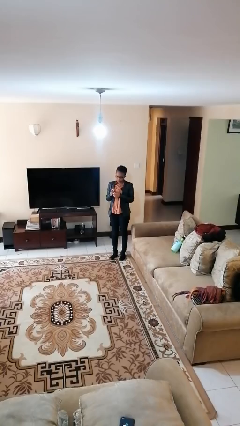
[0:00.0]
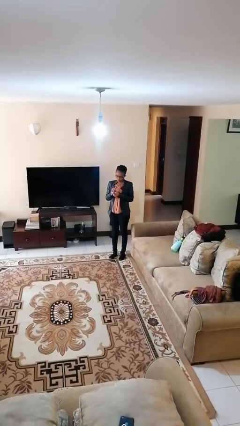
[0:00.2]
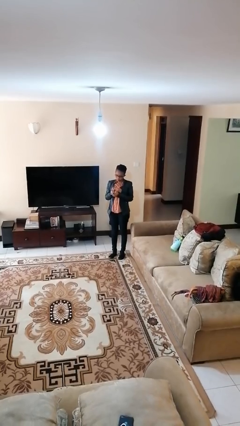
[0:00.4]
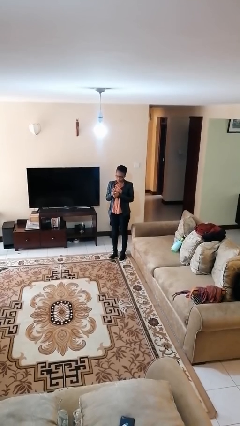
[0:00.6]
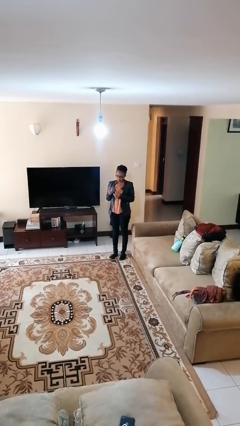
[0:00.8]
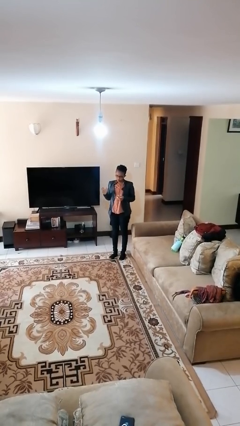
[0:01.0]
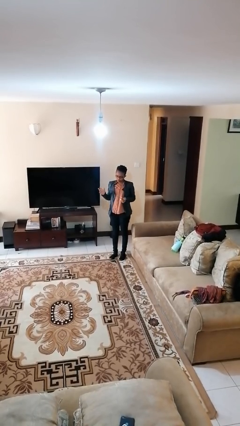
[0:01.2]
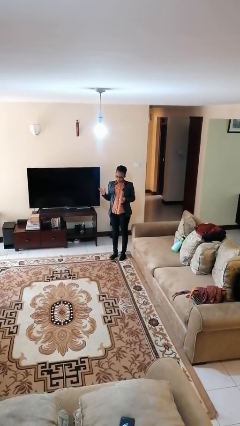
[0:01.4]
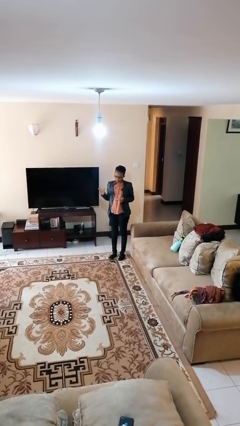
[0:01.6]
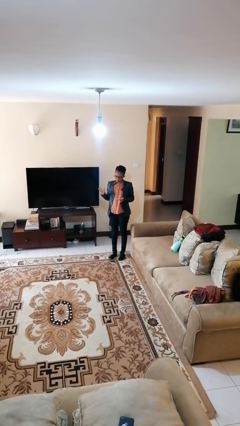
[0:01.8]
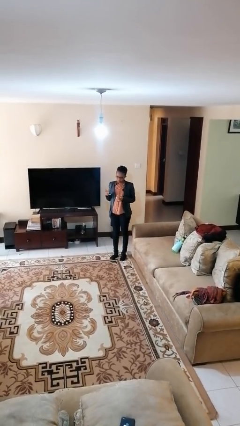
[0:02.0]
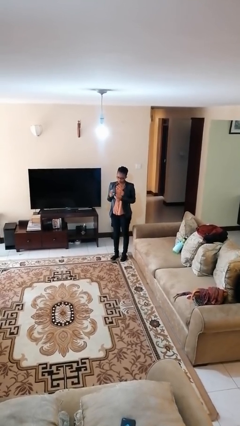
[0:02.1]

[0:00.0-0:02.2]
person puts on ring

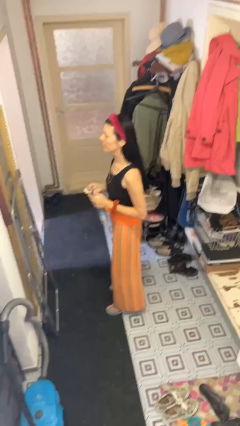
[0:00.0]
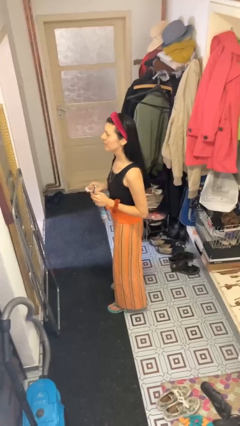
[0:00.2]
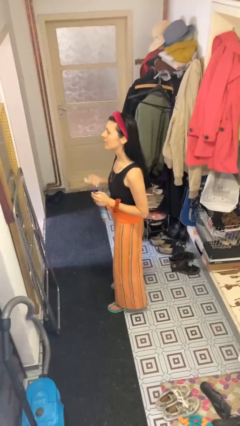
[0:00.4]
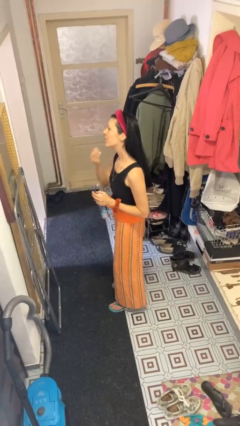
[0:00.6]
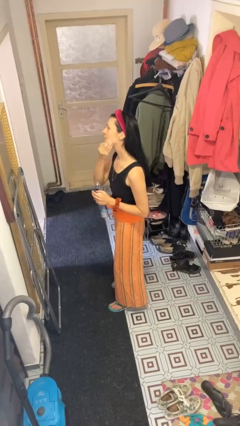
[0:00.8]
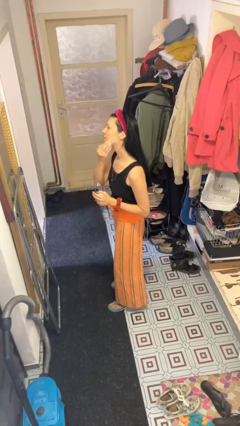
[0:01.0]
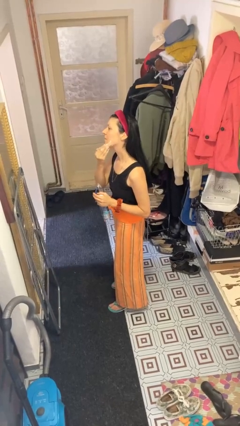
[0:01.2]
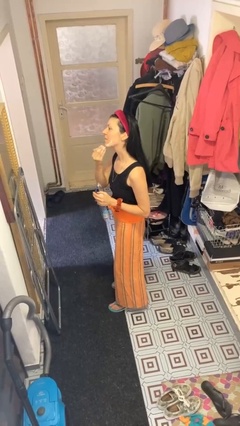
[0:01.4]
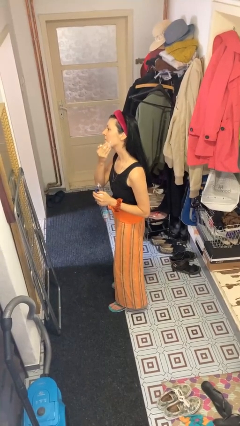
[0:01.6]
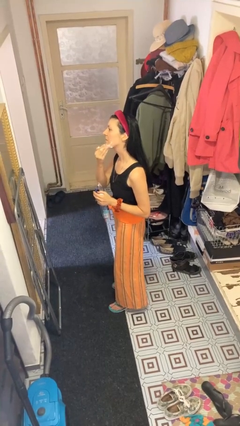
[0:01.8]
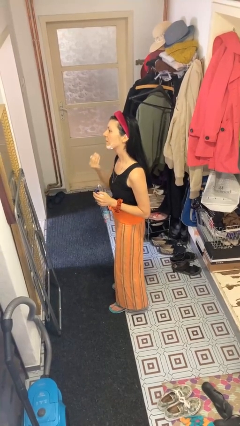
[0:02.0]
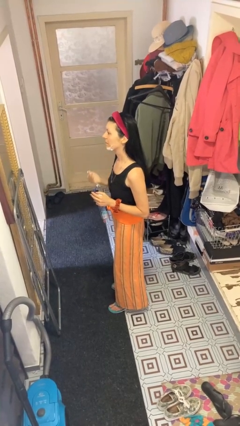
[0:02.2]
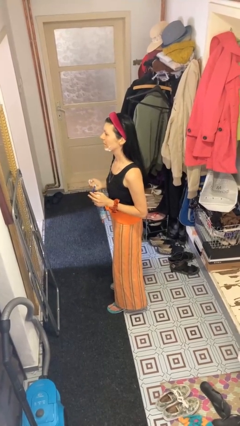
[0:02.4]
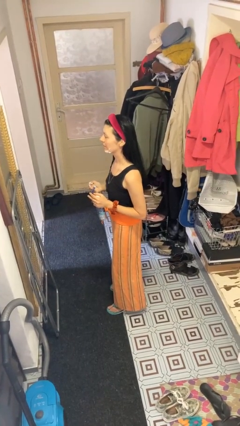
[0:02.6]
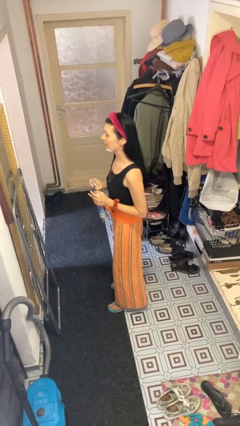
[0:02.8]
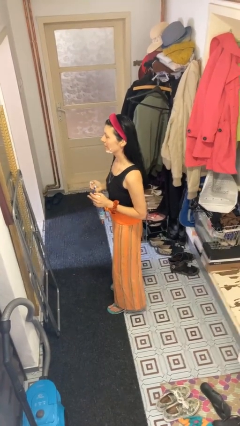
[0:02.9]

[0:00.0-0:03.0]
person applies shaving cream

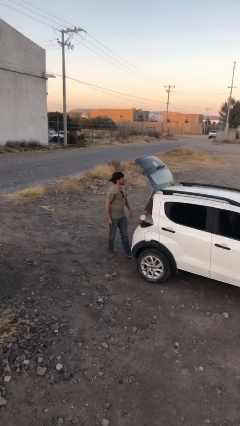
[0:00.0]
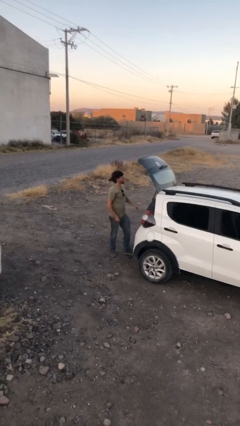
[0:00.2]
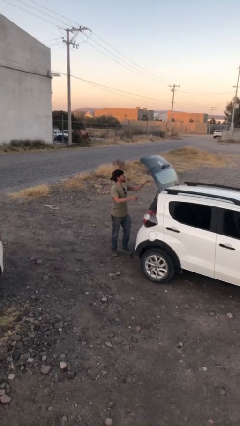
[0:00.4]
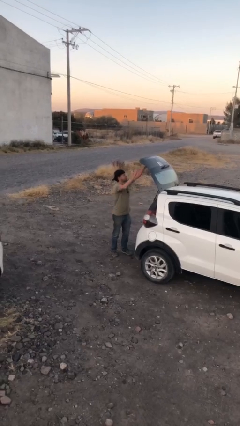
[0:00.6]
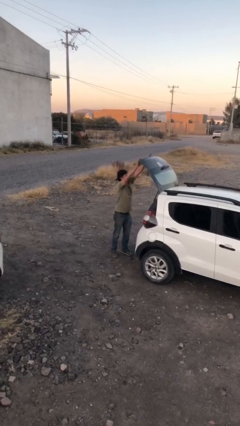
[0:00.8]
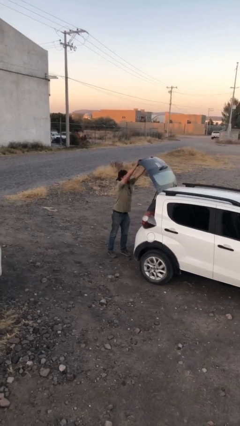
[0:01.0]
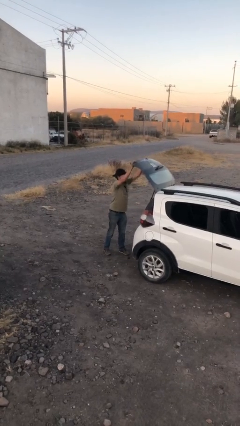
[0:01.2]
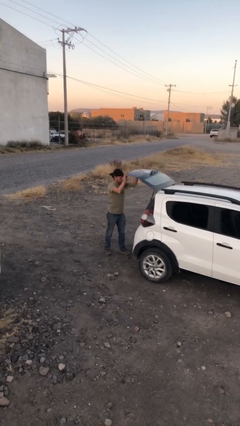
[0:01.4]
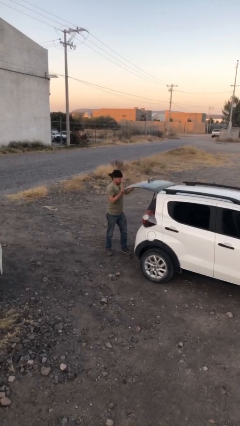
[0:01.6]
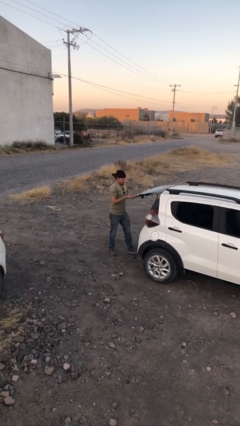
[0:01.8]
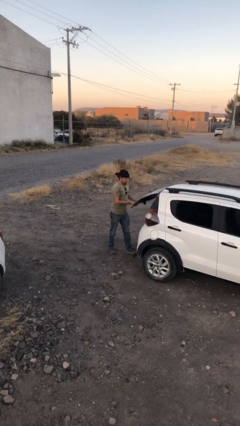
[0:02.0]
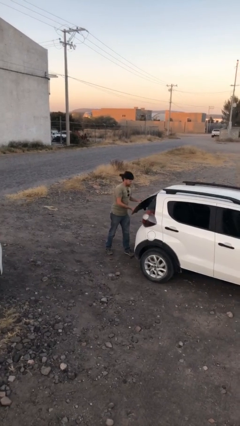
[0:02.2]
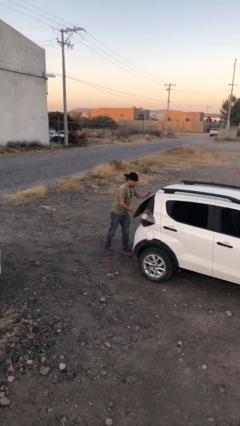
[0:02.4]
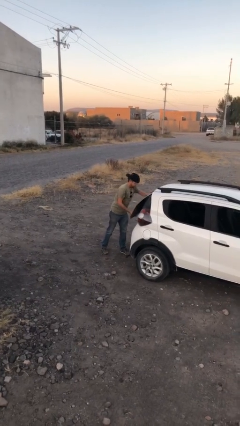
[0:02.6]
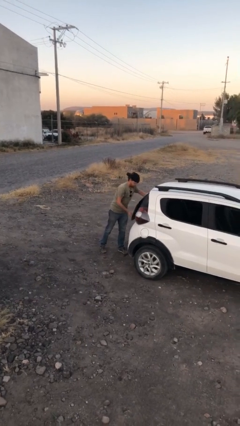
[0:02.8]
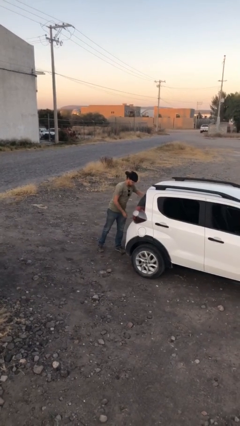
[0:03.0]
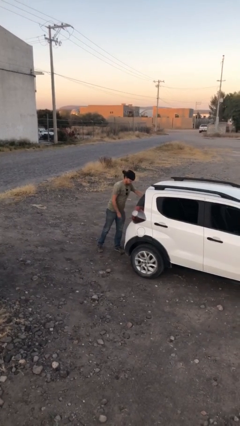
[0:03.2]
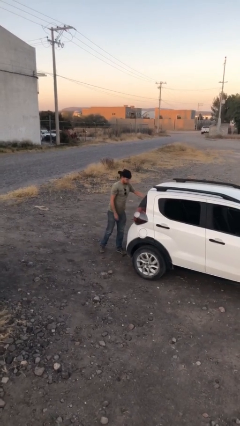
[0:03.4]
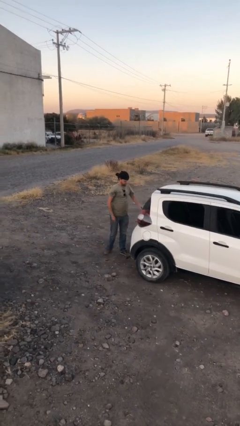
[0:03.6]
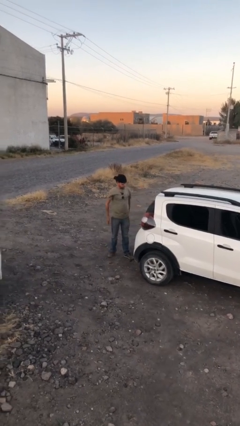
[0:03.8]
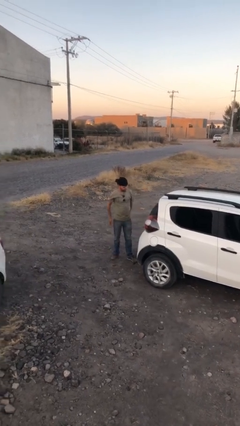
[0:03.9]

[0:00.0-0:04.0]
person closes car trunk

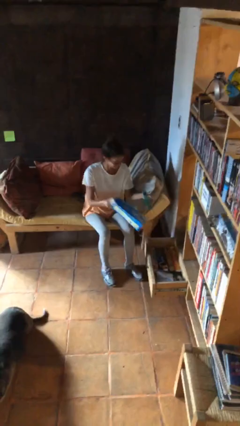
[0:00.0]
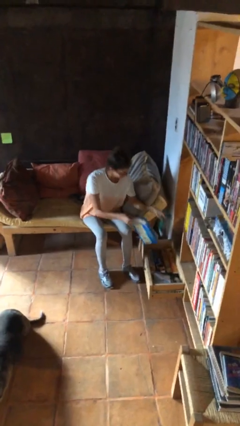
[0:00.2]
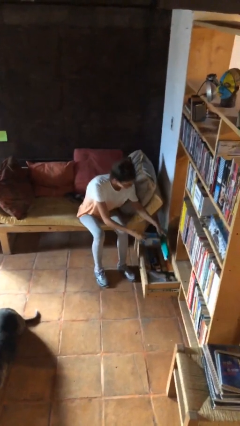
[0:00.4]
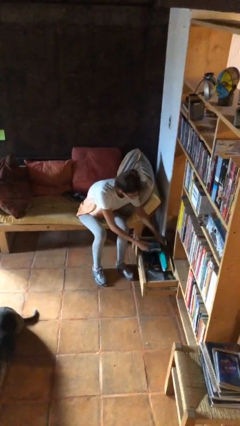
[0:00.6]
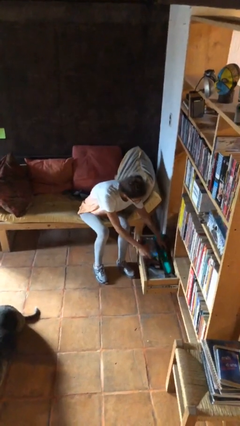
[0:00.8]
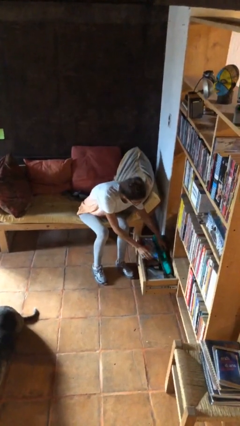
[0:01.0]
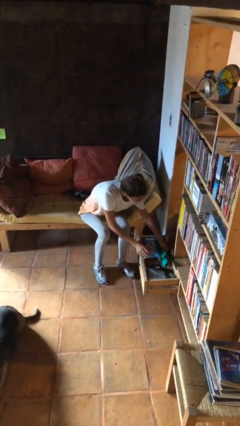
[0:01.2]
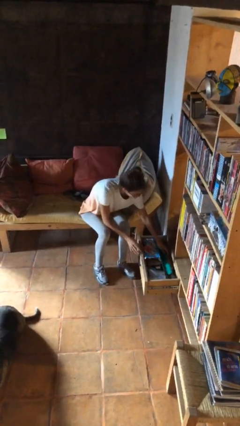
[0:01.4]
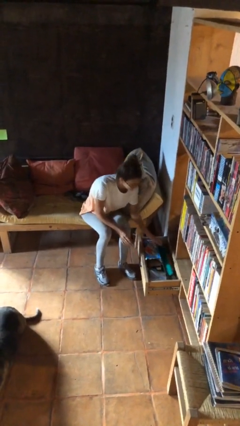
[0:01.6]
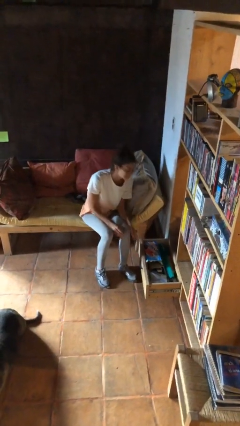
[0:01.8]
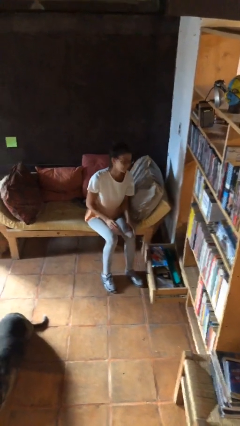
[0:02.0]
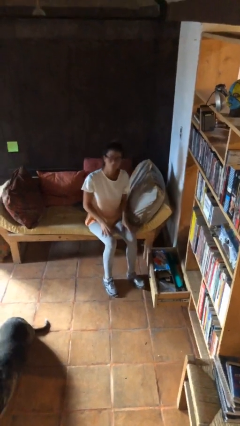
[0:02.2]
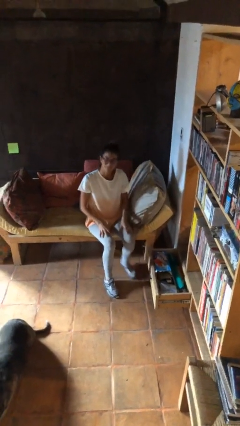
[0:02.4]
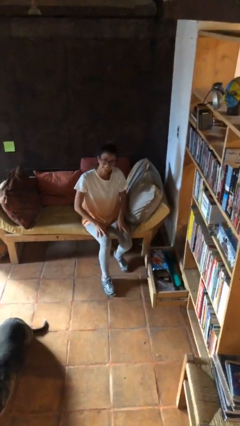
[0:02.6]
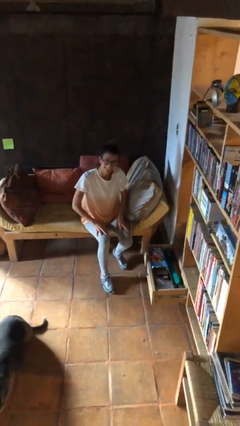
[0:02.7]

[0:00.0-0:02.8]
person puts down object into cabinet

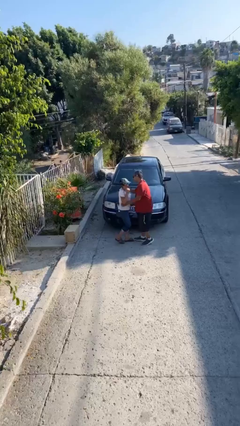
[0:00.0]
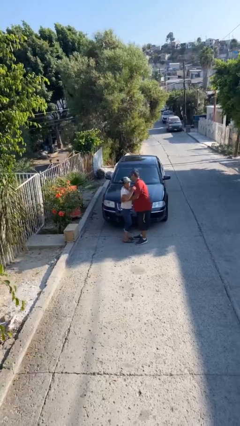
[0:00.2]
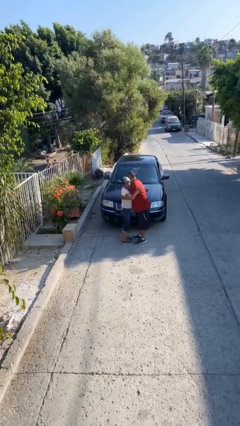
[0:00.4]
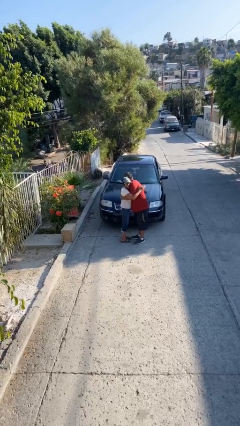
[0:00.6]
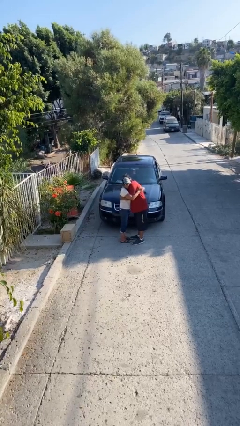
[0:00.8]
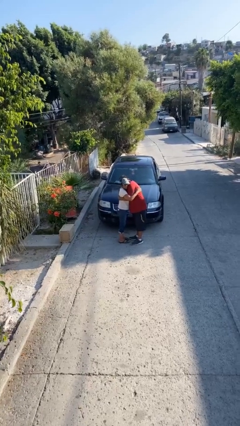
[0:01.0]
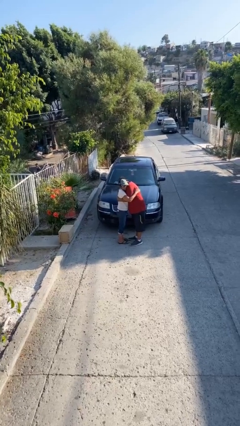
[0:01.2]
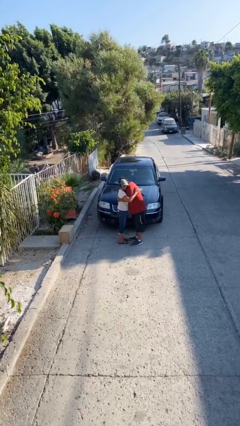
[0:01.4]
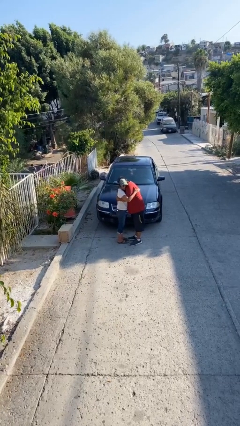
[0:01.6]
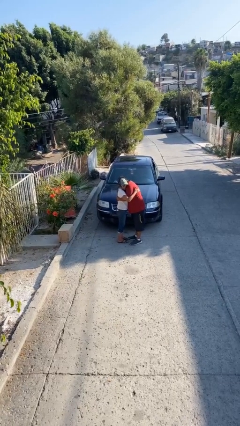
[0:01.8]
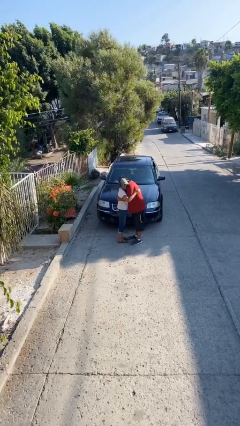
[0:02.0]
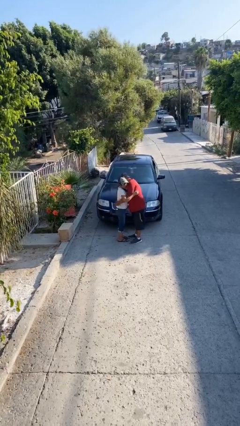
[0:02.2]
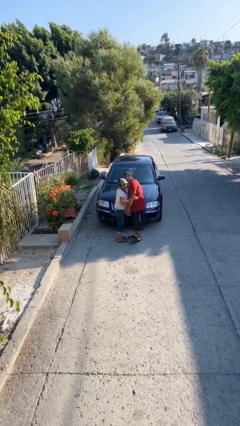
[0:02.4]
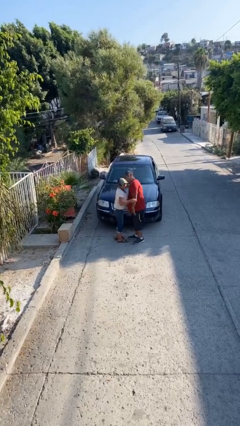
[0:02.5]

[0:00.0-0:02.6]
person embraces person

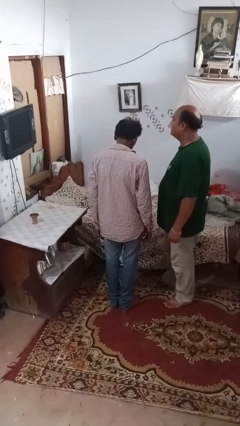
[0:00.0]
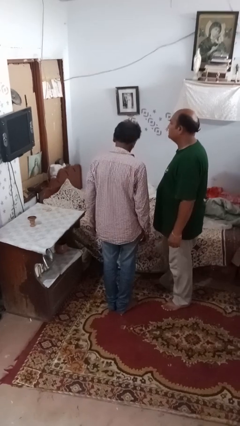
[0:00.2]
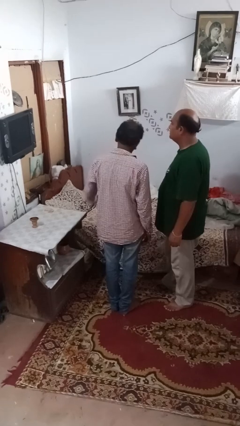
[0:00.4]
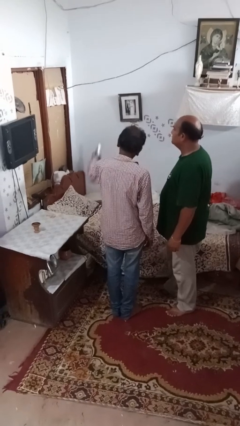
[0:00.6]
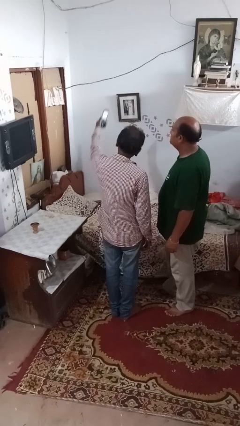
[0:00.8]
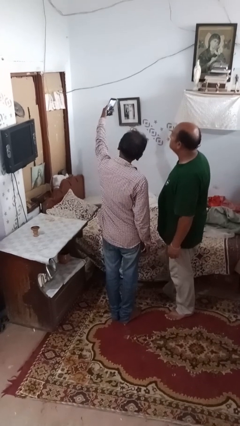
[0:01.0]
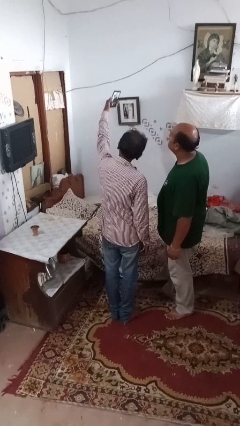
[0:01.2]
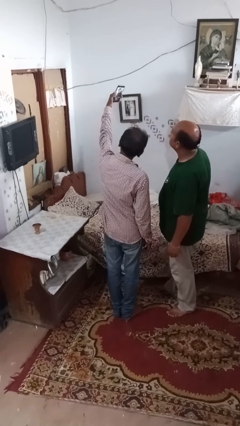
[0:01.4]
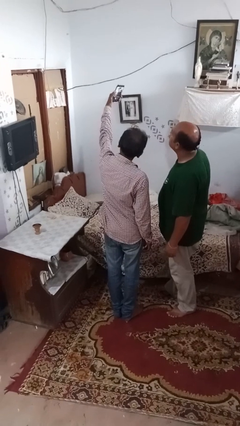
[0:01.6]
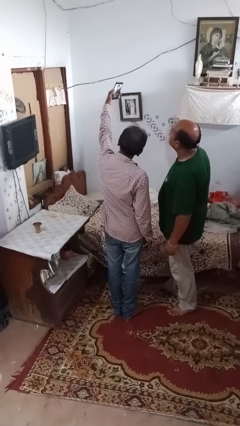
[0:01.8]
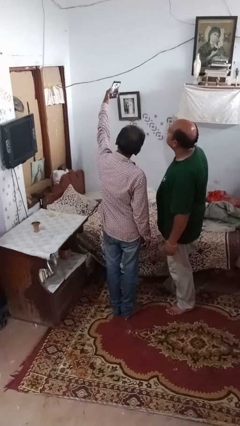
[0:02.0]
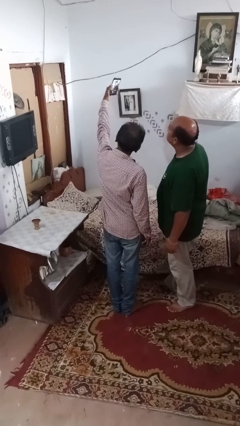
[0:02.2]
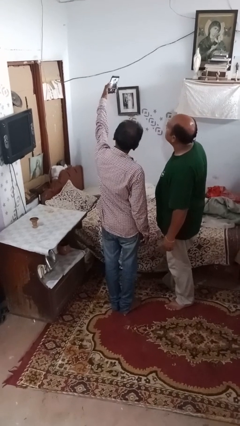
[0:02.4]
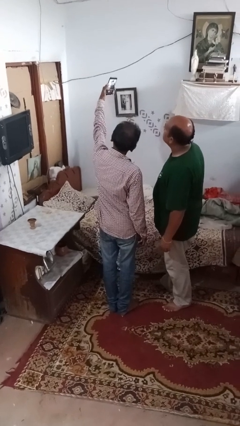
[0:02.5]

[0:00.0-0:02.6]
person takes selfie with person
